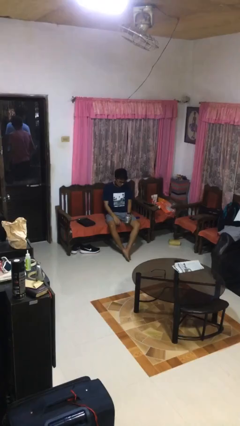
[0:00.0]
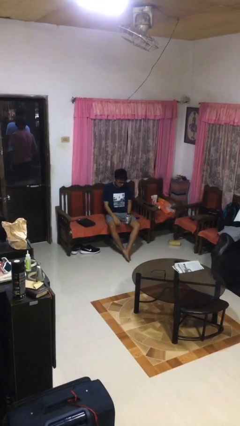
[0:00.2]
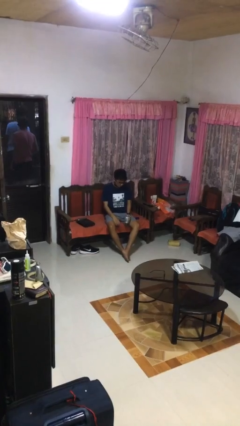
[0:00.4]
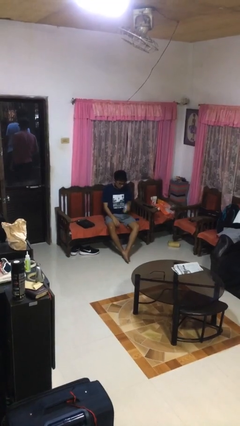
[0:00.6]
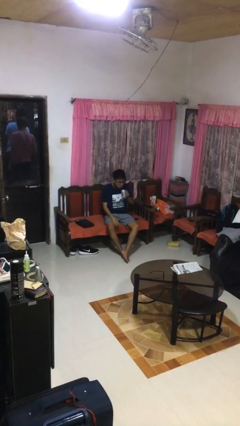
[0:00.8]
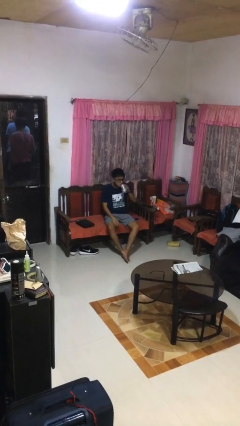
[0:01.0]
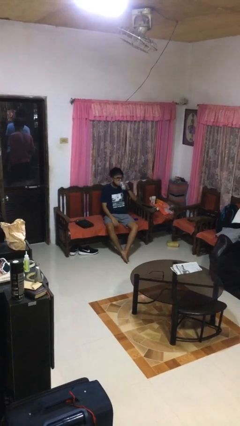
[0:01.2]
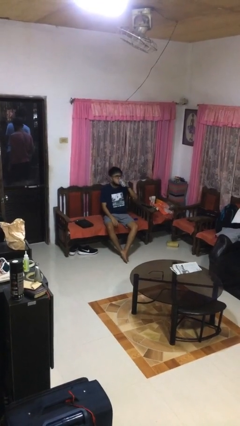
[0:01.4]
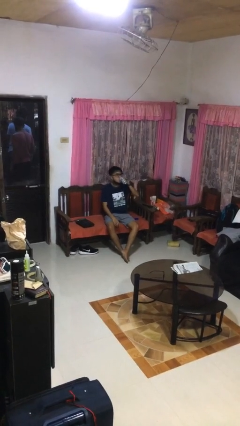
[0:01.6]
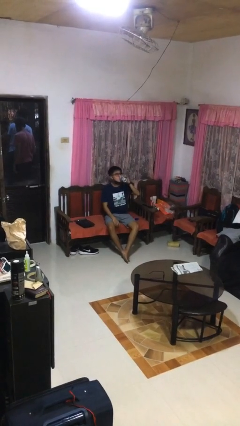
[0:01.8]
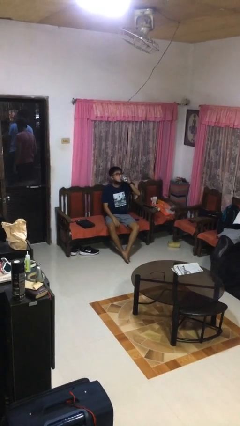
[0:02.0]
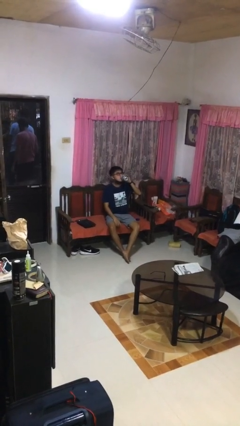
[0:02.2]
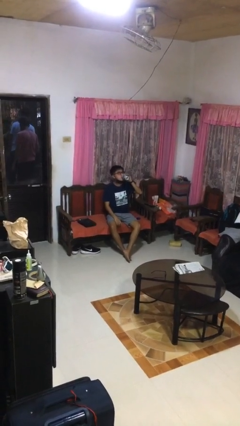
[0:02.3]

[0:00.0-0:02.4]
person drinks from beverage can

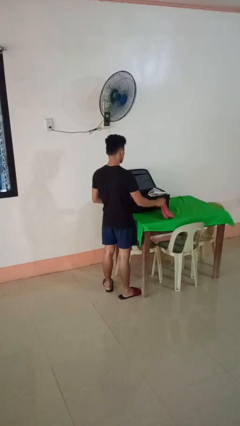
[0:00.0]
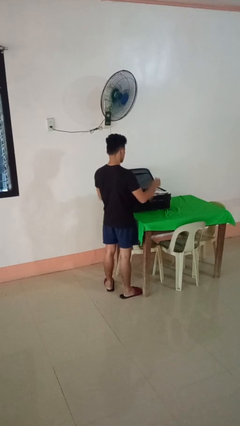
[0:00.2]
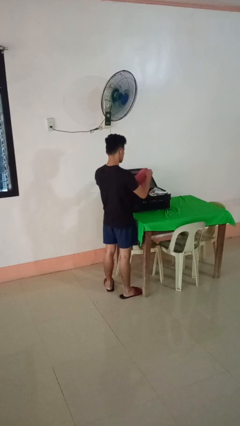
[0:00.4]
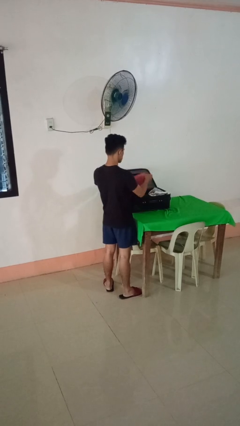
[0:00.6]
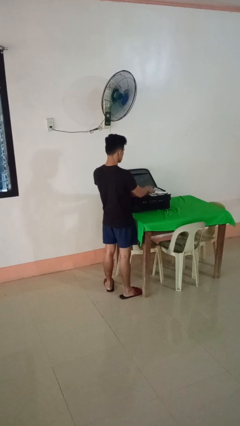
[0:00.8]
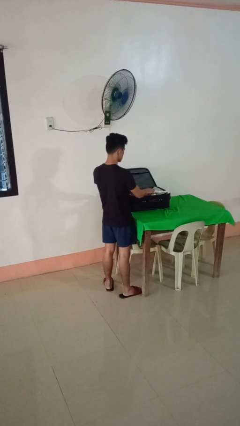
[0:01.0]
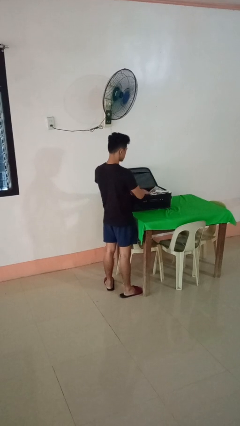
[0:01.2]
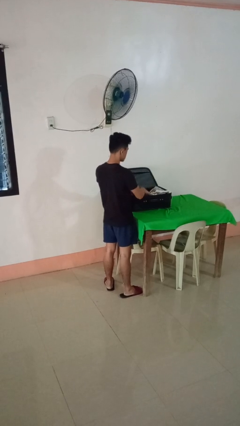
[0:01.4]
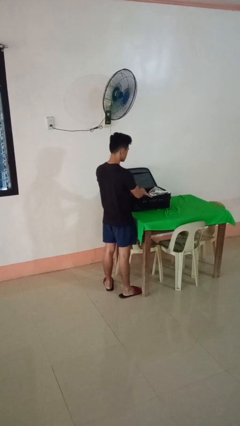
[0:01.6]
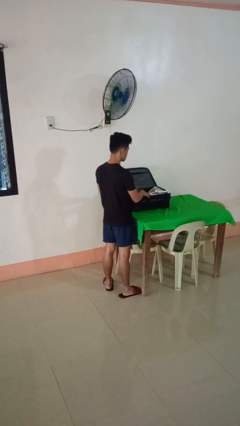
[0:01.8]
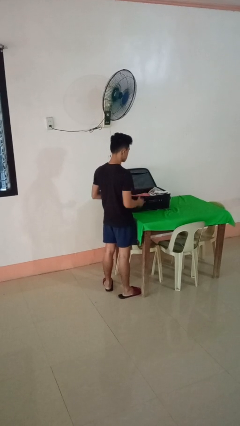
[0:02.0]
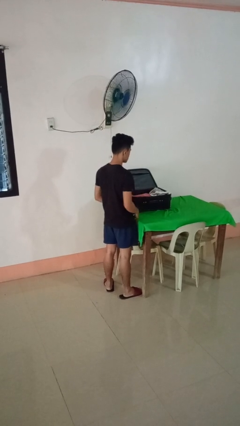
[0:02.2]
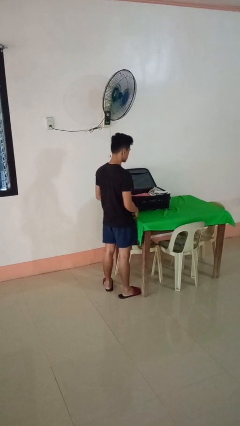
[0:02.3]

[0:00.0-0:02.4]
person loads clothes into suitcase

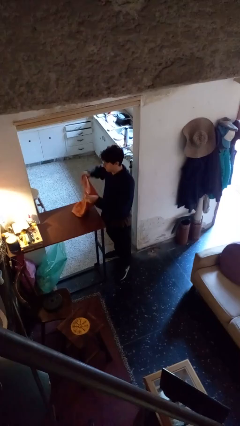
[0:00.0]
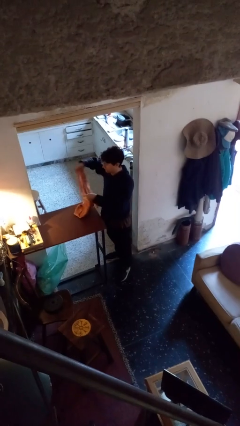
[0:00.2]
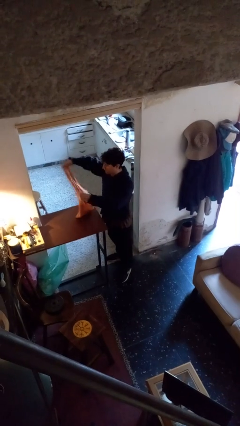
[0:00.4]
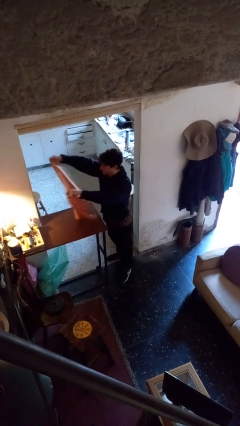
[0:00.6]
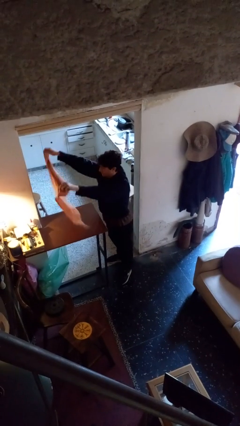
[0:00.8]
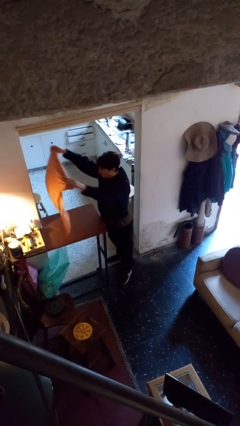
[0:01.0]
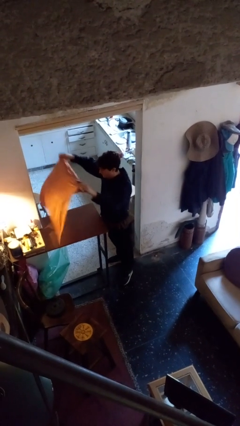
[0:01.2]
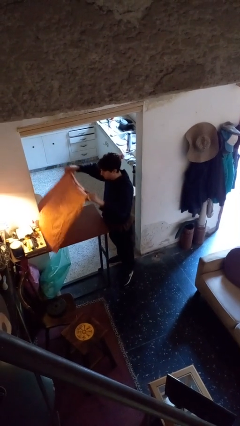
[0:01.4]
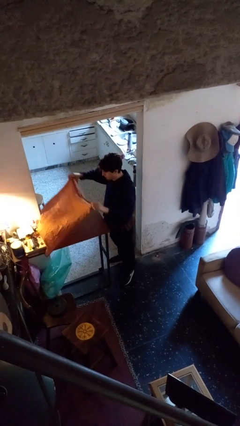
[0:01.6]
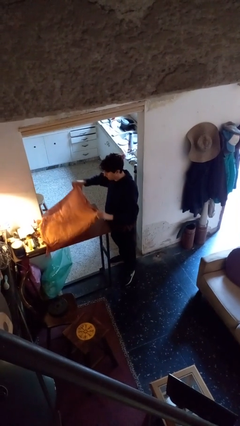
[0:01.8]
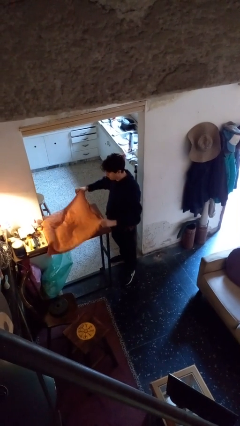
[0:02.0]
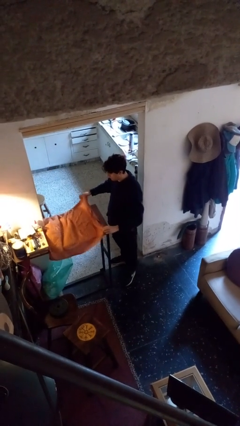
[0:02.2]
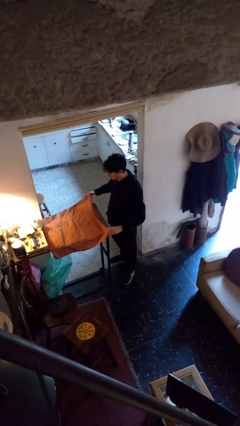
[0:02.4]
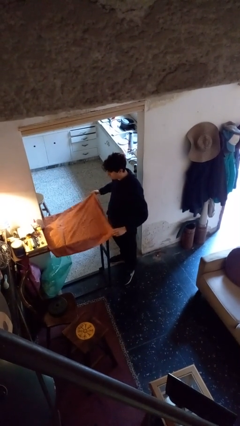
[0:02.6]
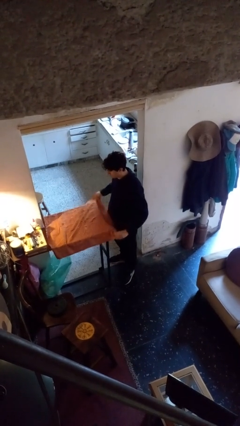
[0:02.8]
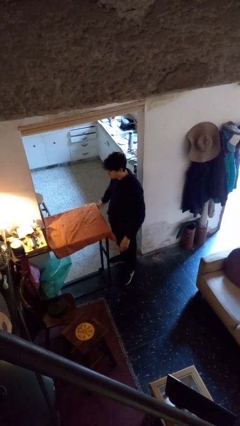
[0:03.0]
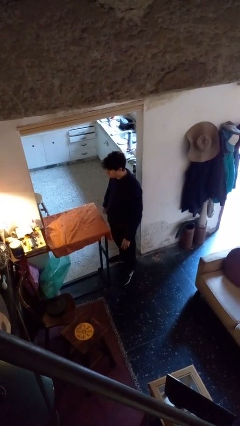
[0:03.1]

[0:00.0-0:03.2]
person spreads tablecloth

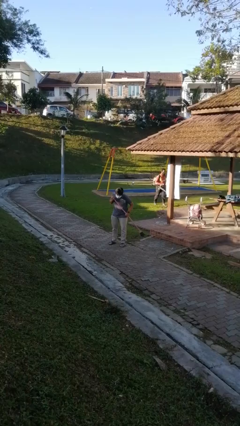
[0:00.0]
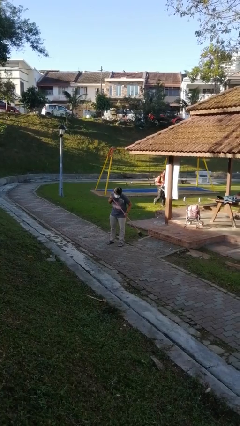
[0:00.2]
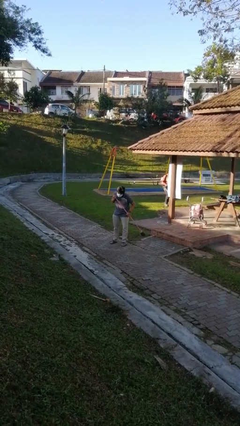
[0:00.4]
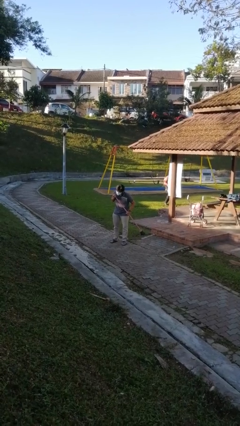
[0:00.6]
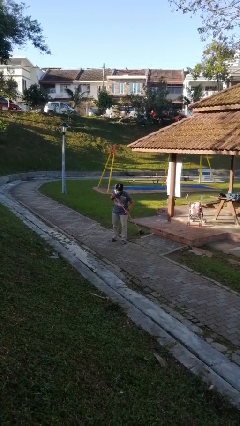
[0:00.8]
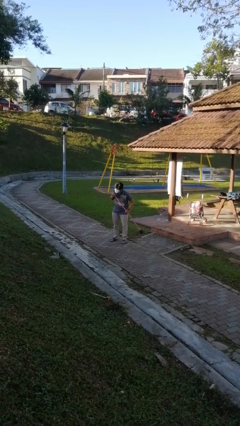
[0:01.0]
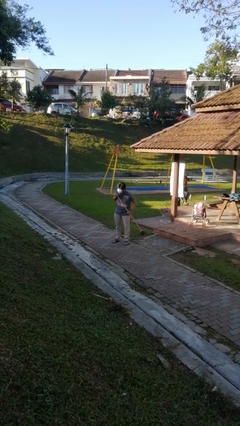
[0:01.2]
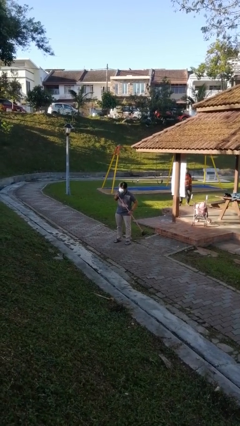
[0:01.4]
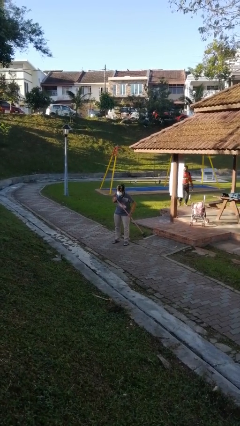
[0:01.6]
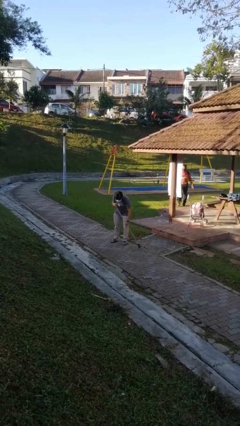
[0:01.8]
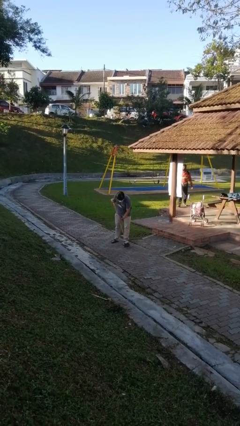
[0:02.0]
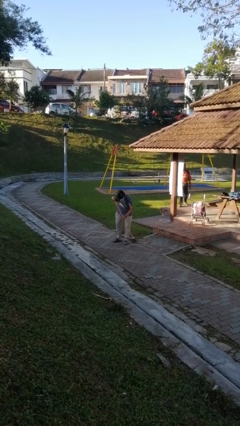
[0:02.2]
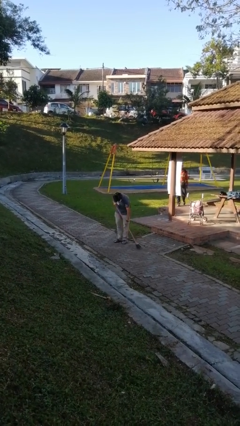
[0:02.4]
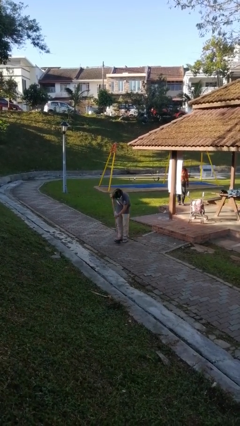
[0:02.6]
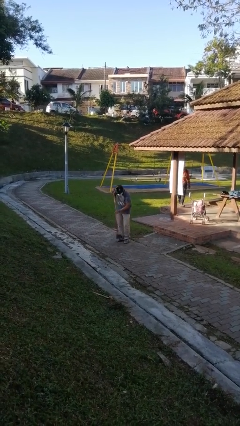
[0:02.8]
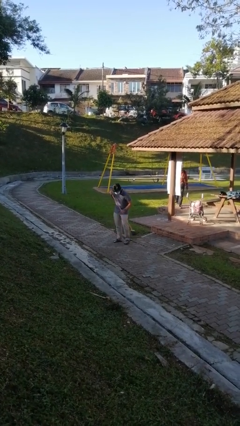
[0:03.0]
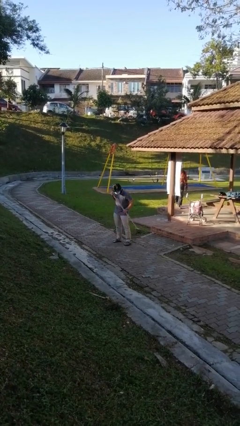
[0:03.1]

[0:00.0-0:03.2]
person sweeps floor

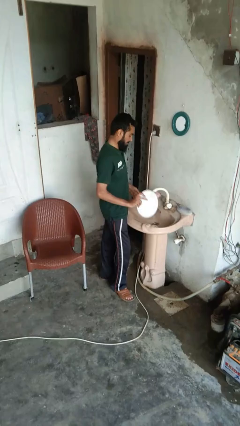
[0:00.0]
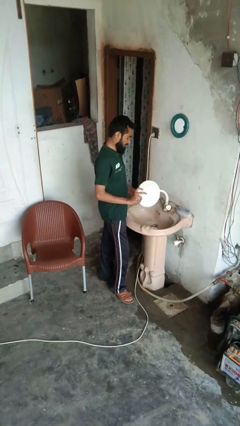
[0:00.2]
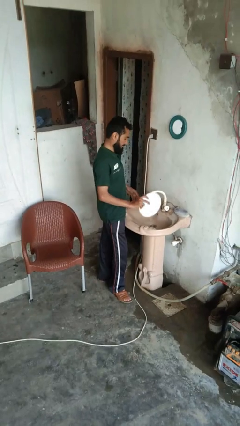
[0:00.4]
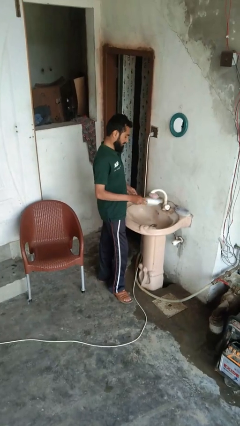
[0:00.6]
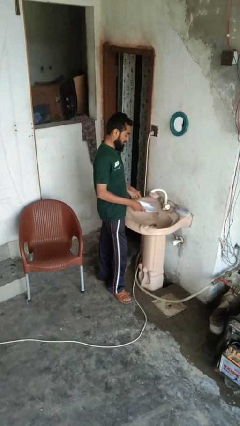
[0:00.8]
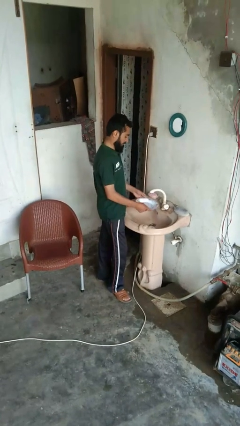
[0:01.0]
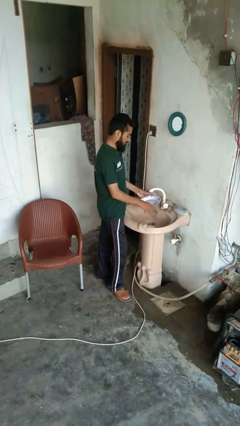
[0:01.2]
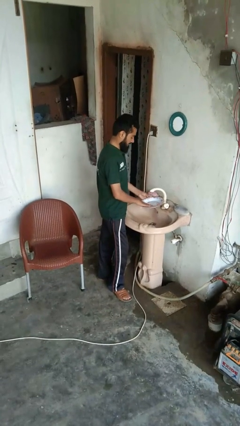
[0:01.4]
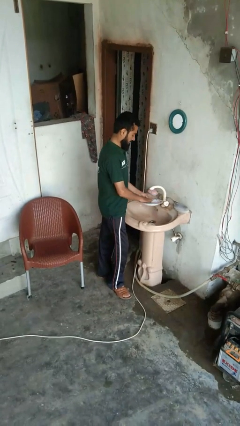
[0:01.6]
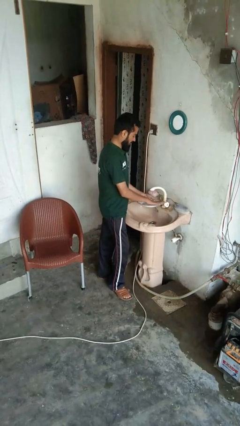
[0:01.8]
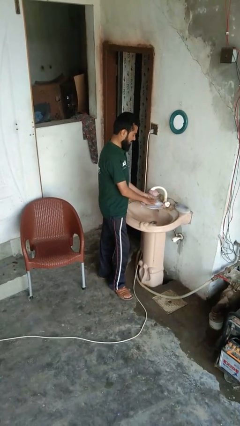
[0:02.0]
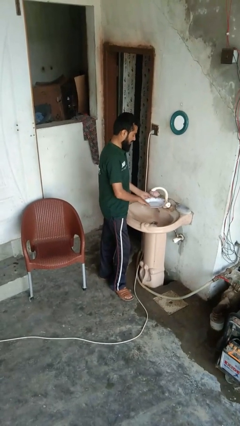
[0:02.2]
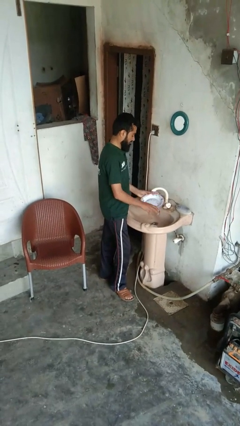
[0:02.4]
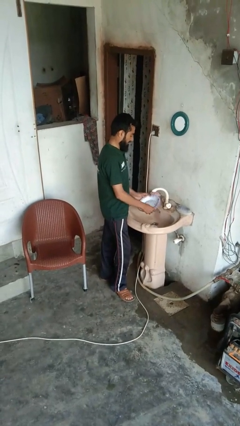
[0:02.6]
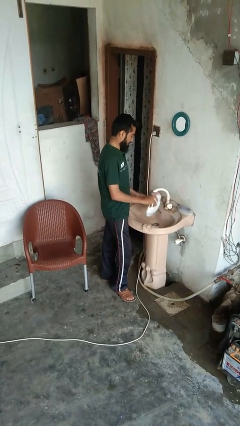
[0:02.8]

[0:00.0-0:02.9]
person washes dish

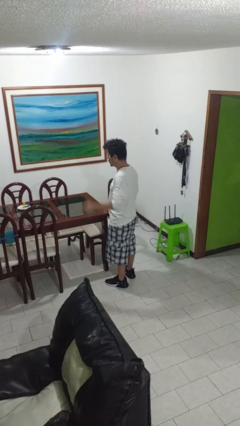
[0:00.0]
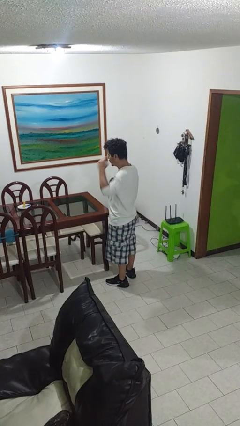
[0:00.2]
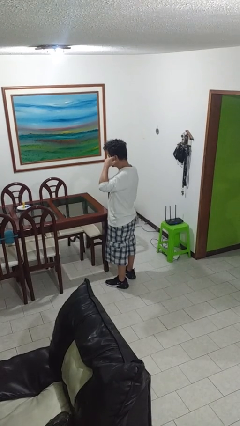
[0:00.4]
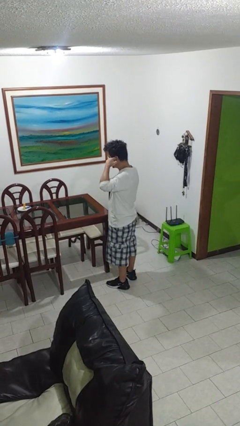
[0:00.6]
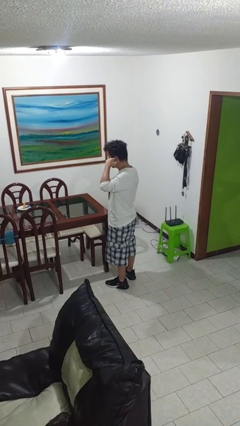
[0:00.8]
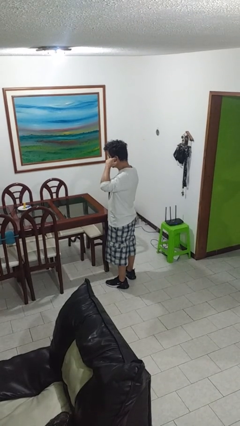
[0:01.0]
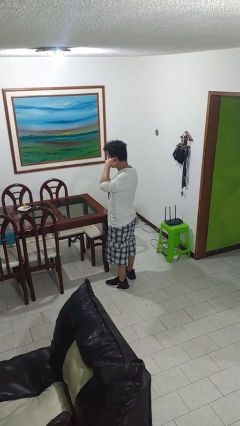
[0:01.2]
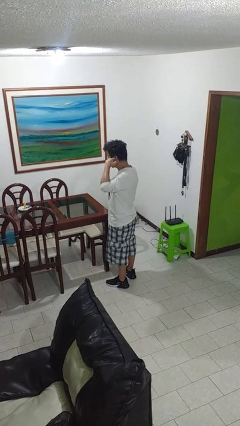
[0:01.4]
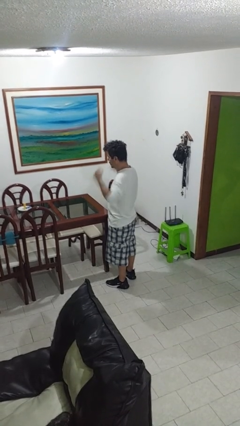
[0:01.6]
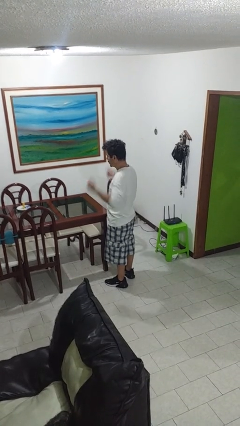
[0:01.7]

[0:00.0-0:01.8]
person puts fingers in ear

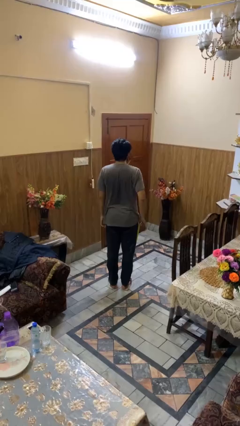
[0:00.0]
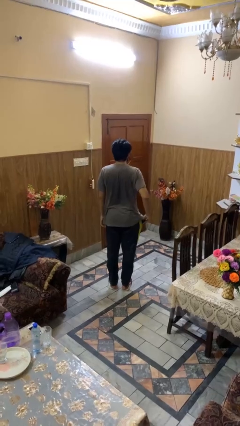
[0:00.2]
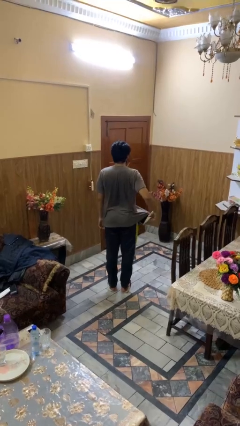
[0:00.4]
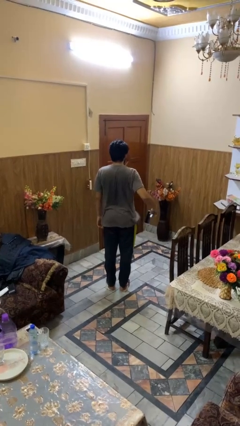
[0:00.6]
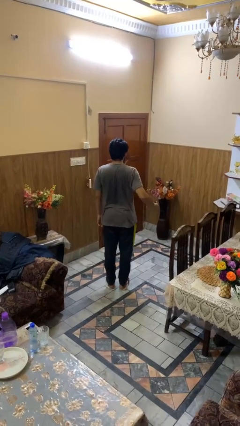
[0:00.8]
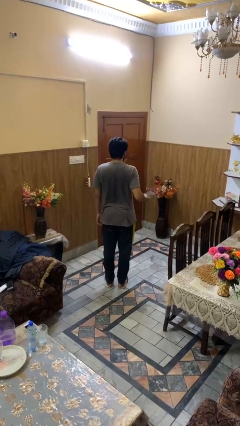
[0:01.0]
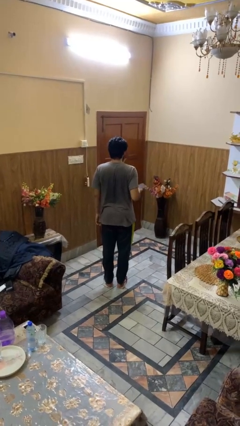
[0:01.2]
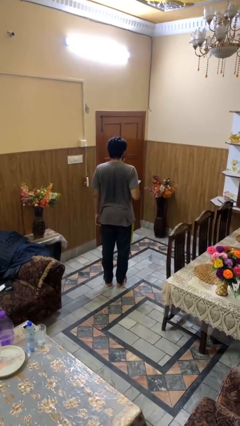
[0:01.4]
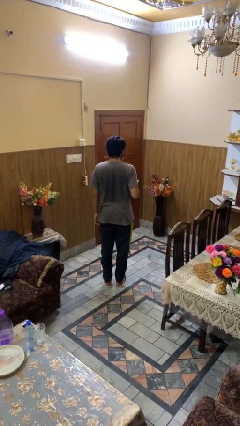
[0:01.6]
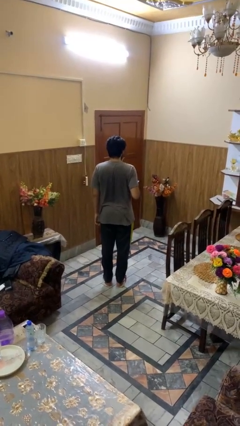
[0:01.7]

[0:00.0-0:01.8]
person takes phone from pocket
